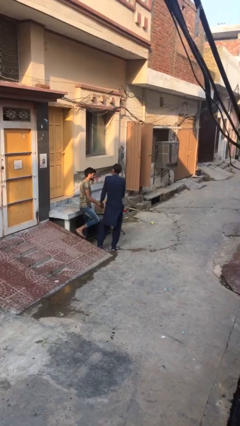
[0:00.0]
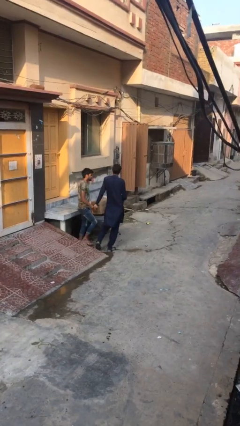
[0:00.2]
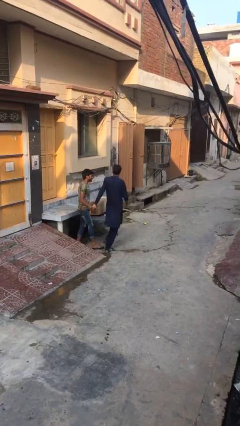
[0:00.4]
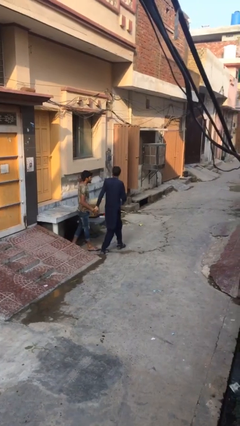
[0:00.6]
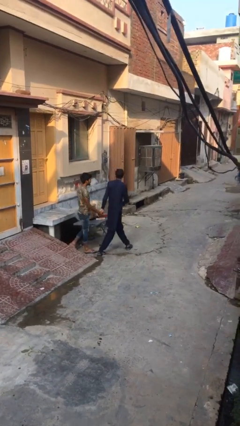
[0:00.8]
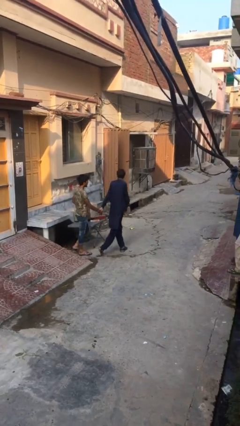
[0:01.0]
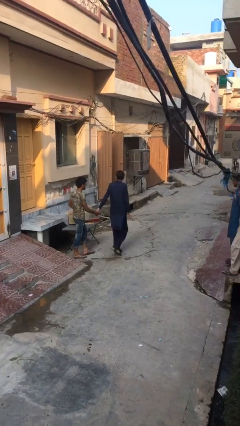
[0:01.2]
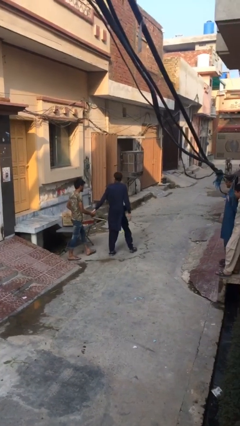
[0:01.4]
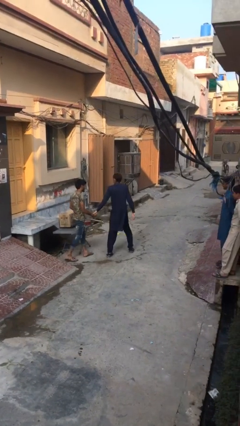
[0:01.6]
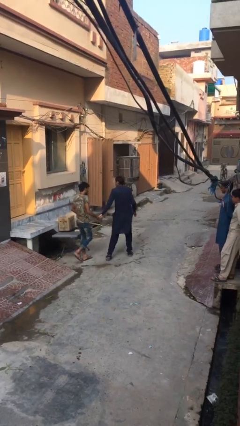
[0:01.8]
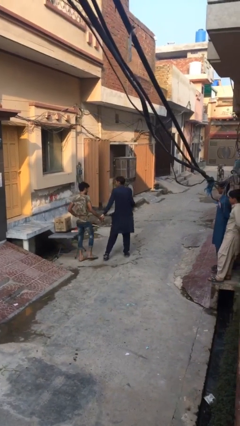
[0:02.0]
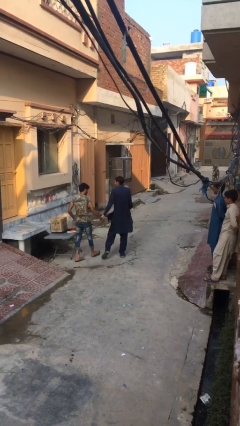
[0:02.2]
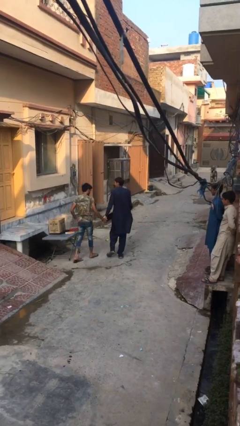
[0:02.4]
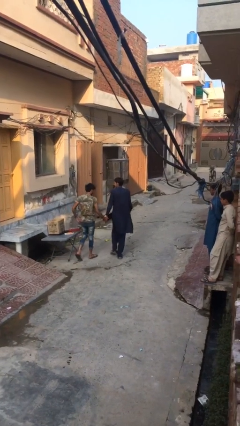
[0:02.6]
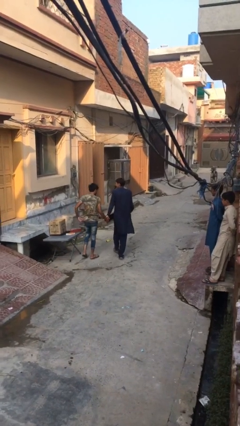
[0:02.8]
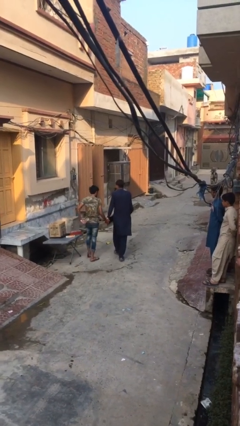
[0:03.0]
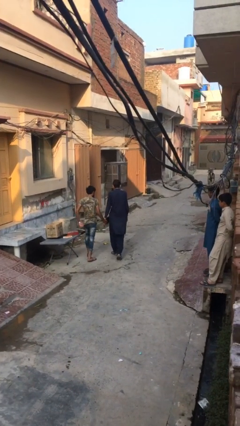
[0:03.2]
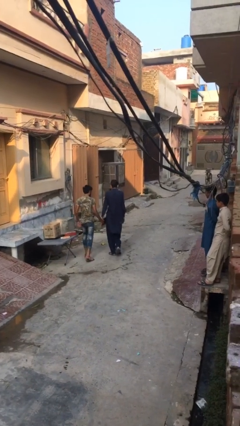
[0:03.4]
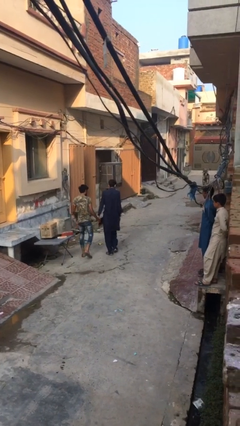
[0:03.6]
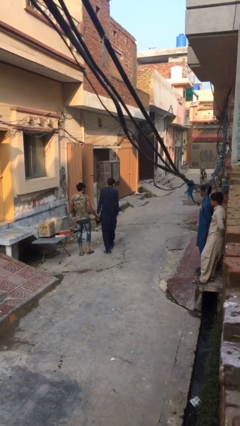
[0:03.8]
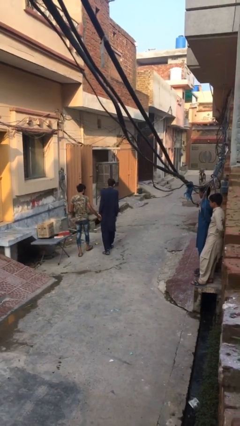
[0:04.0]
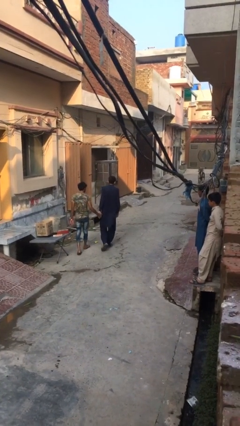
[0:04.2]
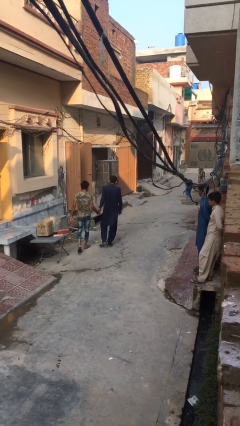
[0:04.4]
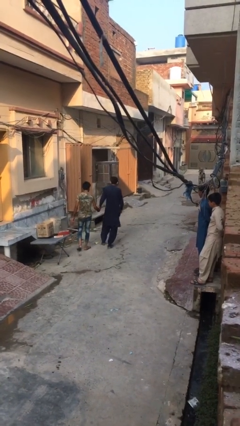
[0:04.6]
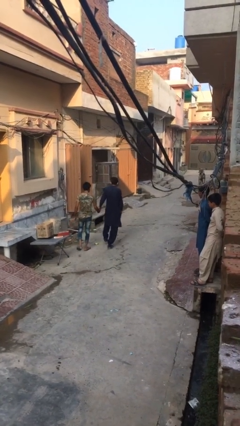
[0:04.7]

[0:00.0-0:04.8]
person talks to person

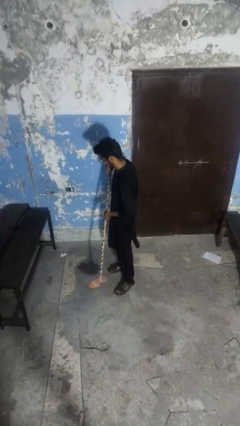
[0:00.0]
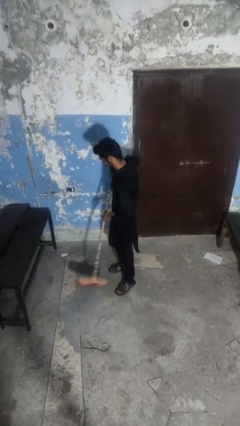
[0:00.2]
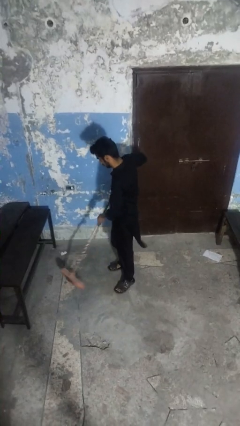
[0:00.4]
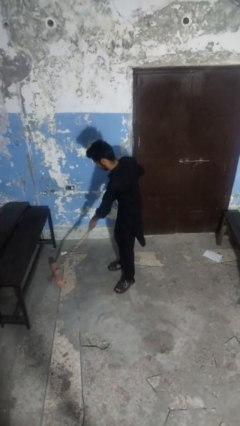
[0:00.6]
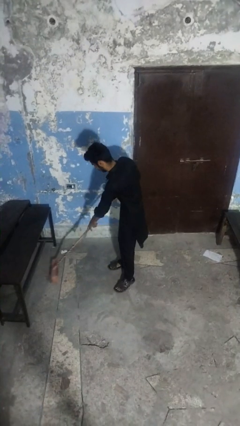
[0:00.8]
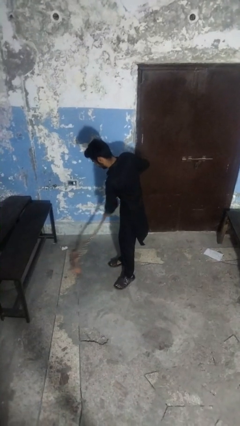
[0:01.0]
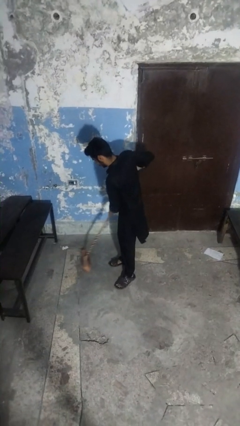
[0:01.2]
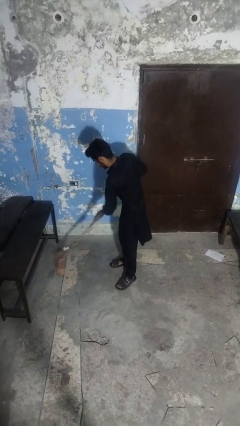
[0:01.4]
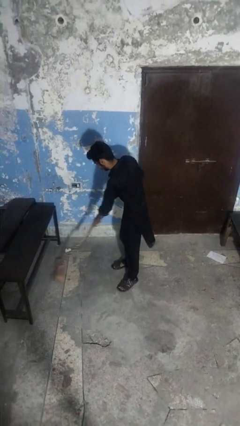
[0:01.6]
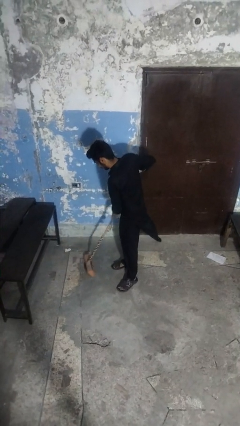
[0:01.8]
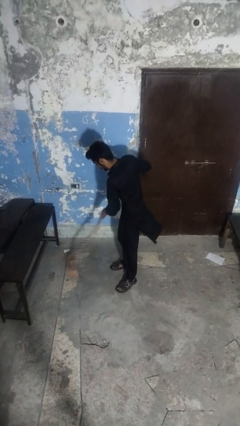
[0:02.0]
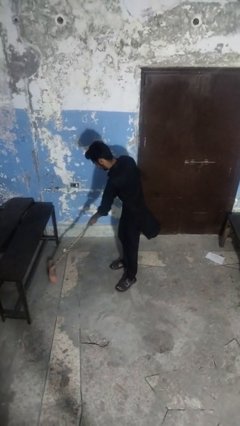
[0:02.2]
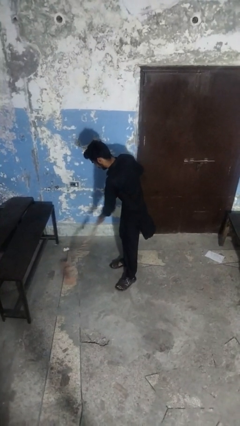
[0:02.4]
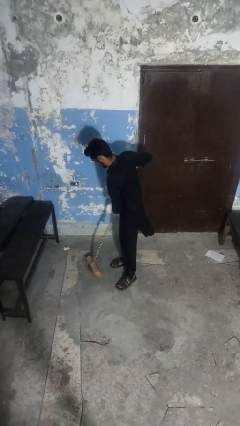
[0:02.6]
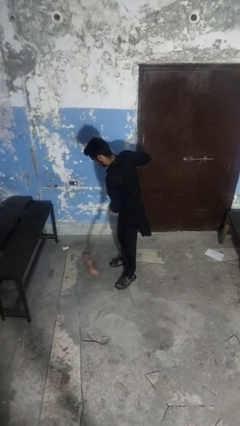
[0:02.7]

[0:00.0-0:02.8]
person sweeps floor

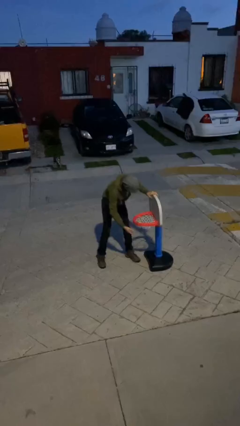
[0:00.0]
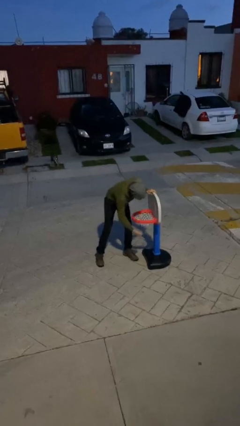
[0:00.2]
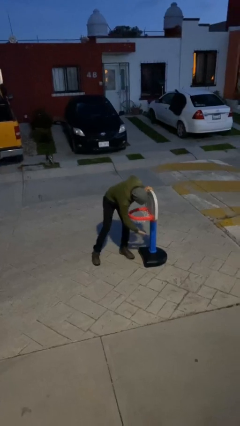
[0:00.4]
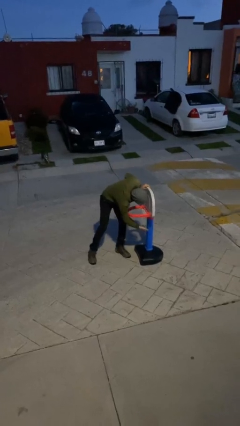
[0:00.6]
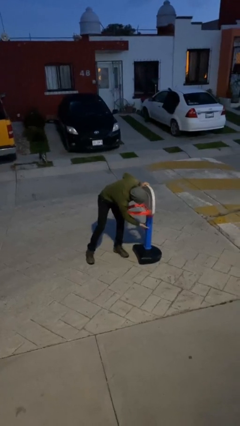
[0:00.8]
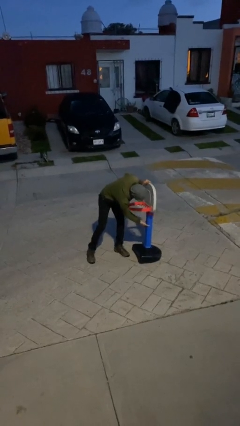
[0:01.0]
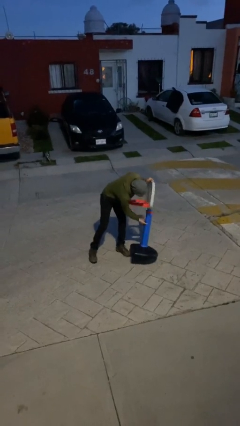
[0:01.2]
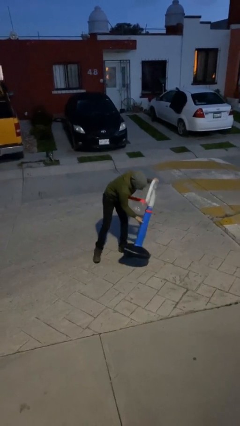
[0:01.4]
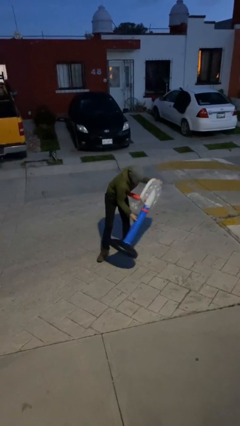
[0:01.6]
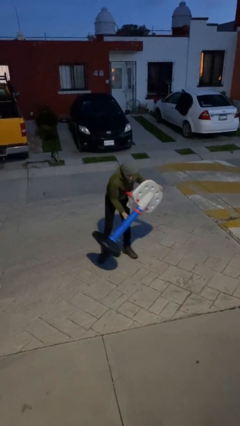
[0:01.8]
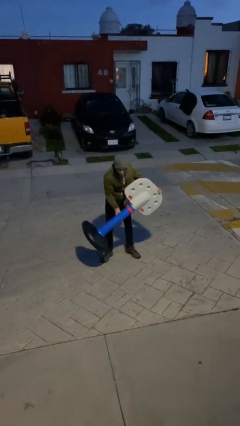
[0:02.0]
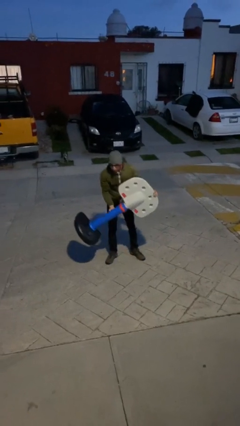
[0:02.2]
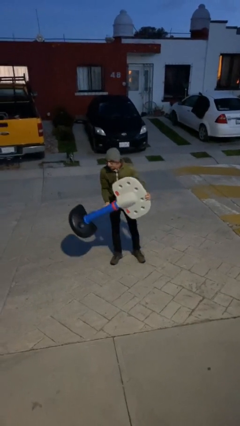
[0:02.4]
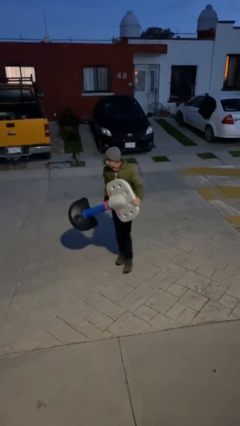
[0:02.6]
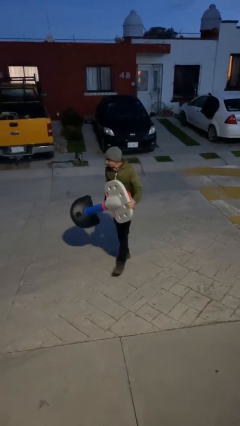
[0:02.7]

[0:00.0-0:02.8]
person picks up object from floor

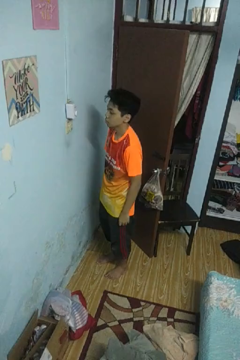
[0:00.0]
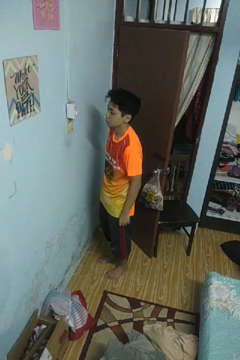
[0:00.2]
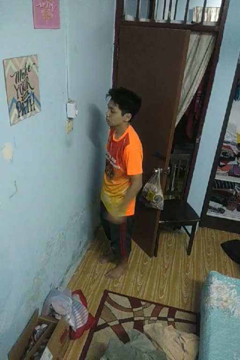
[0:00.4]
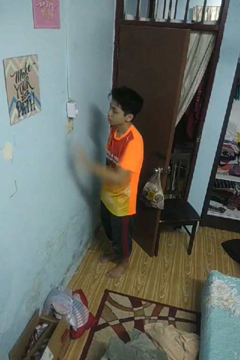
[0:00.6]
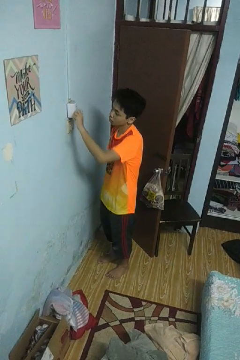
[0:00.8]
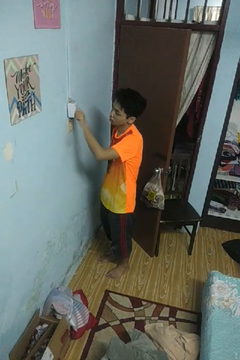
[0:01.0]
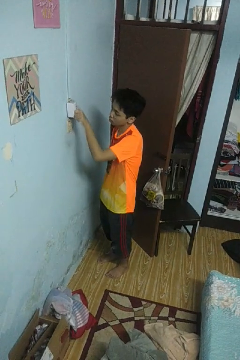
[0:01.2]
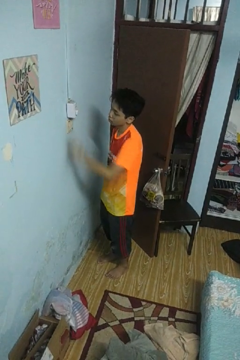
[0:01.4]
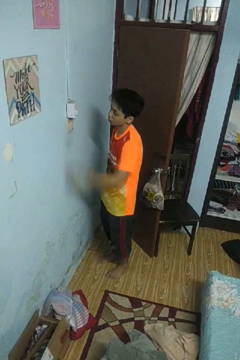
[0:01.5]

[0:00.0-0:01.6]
person adjusts thermostat

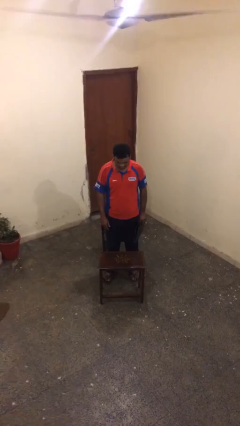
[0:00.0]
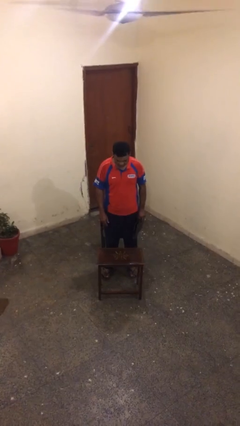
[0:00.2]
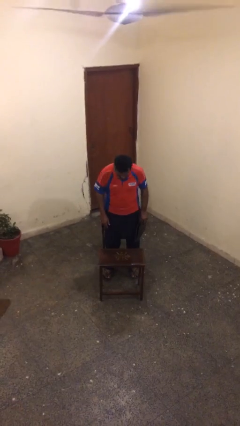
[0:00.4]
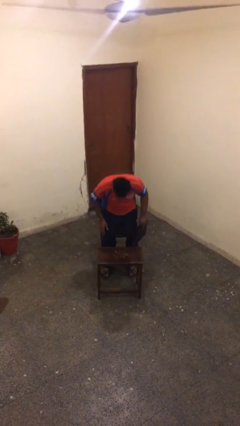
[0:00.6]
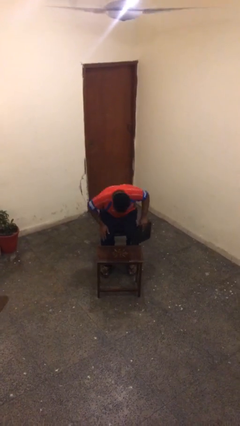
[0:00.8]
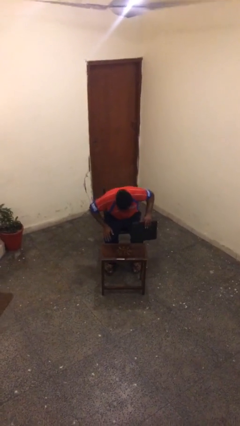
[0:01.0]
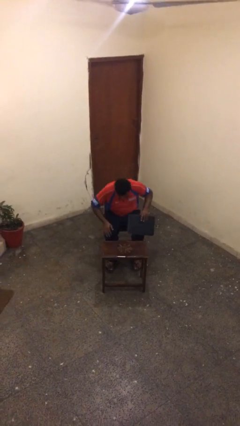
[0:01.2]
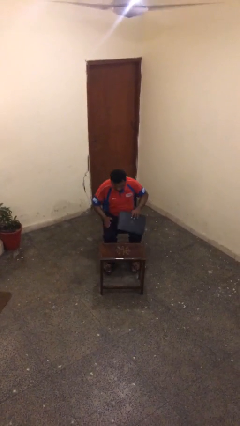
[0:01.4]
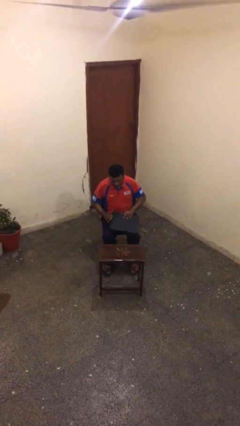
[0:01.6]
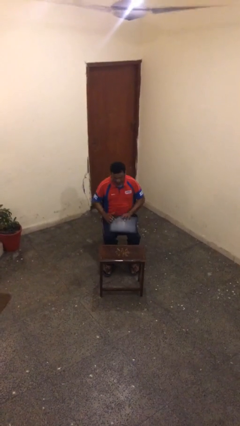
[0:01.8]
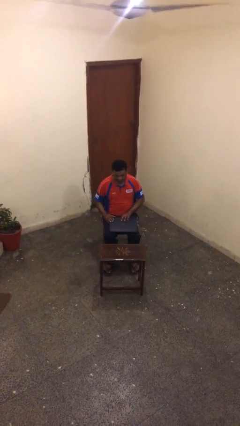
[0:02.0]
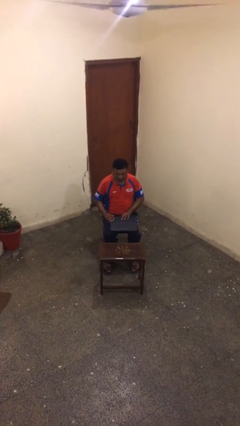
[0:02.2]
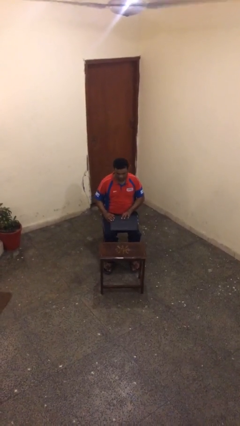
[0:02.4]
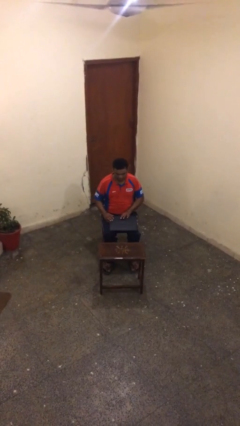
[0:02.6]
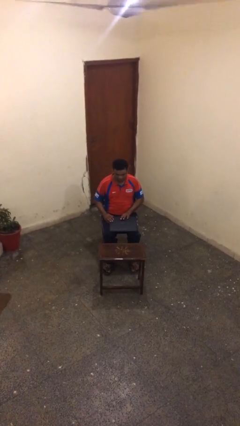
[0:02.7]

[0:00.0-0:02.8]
person sits down

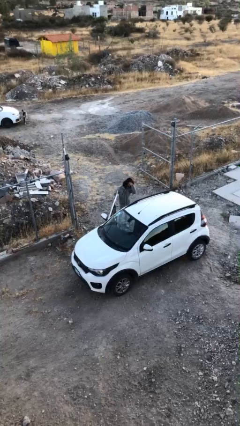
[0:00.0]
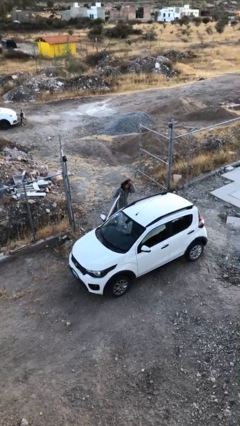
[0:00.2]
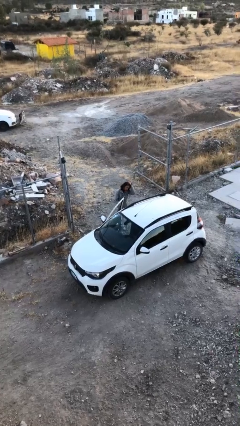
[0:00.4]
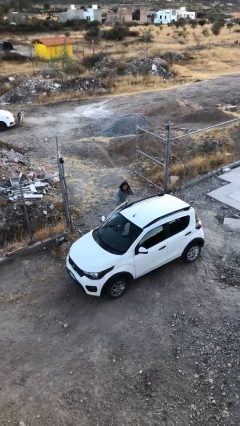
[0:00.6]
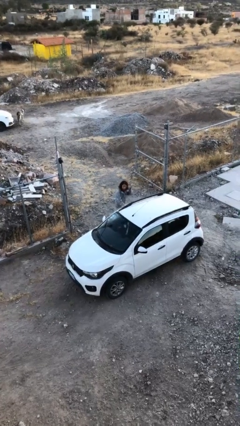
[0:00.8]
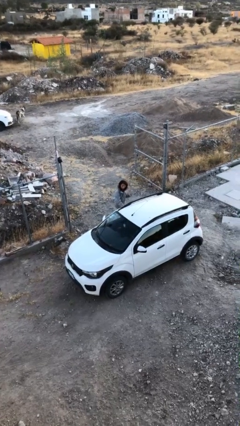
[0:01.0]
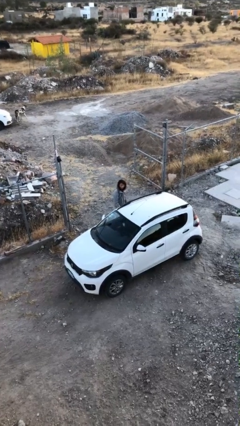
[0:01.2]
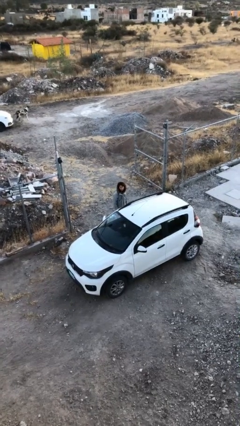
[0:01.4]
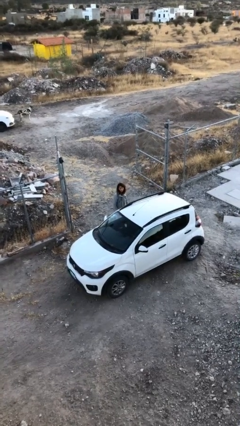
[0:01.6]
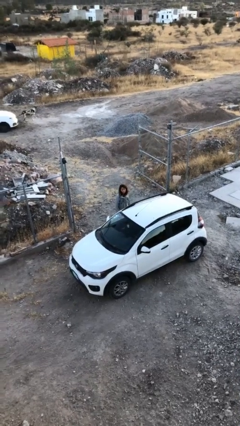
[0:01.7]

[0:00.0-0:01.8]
person closes car door

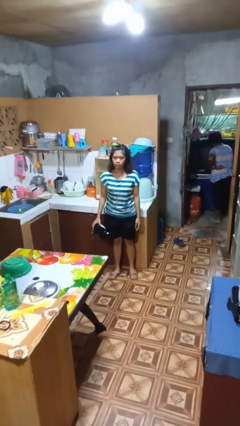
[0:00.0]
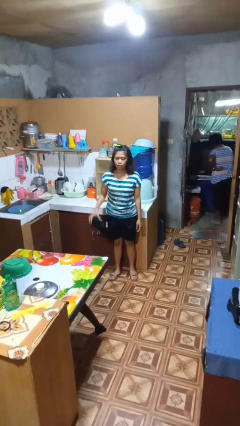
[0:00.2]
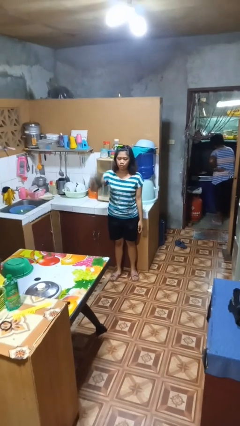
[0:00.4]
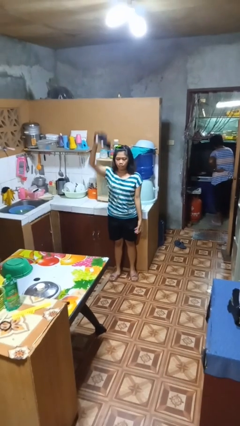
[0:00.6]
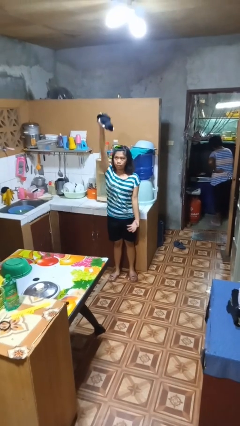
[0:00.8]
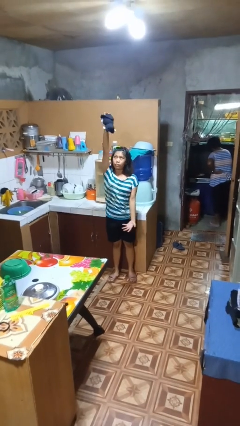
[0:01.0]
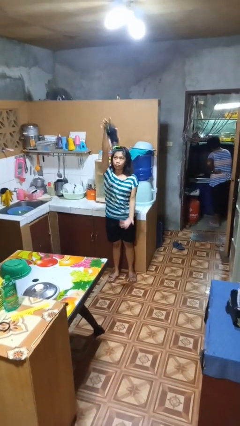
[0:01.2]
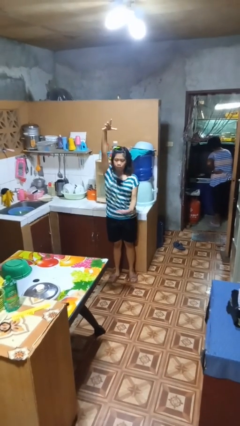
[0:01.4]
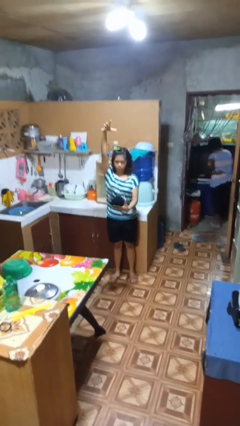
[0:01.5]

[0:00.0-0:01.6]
person drops object
